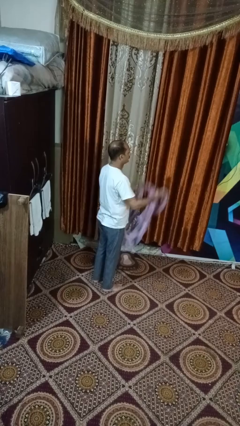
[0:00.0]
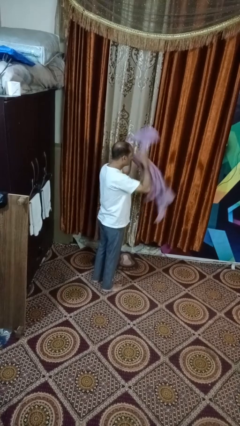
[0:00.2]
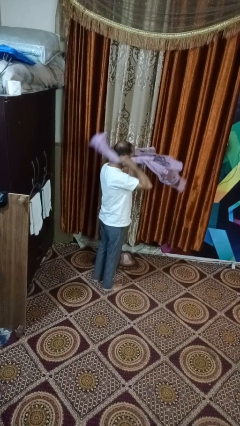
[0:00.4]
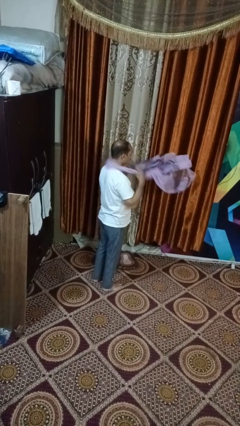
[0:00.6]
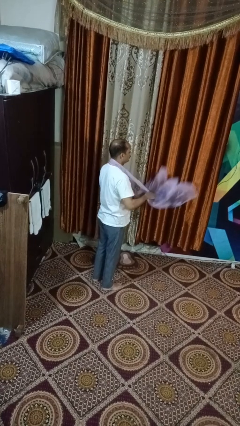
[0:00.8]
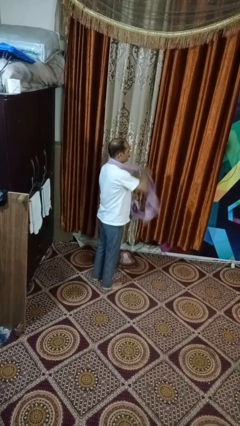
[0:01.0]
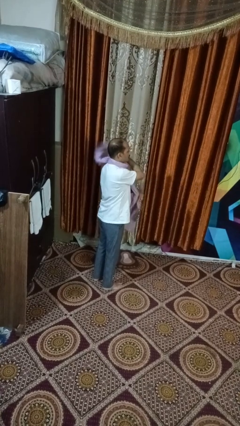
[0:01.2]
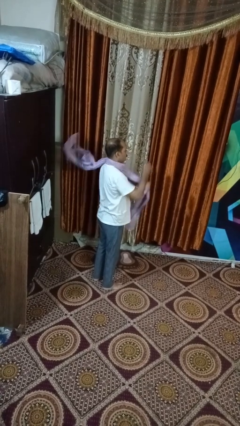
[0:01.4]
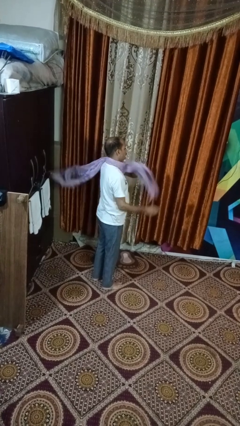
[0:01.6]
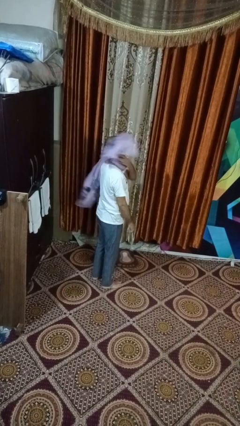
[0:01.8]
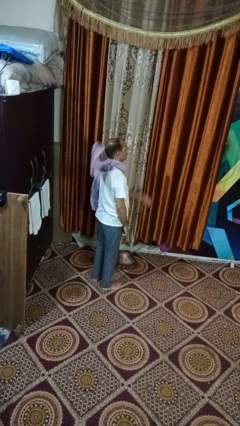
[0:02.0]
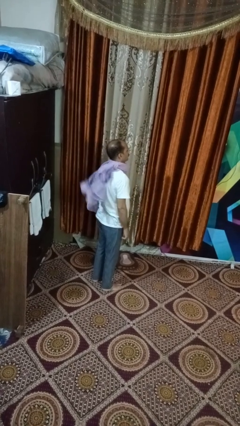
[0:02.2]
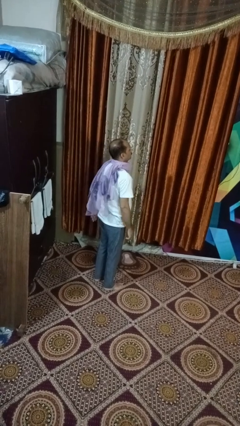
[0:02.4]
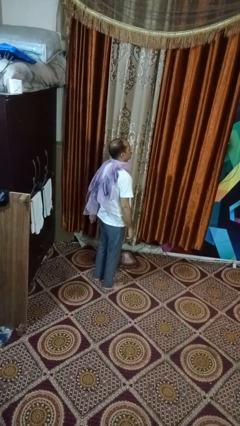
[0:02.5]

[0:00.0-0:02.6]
person puts on scarf

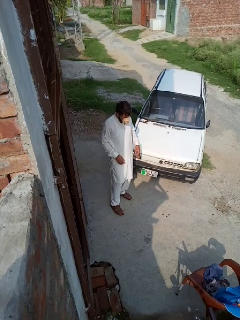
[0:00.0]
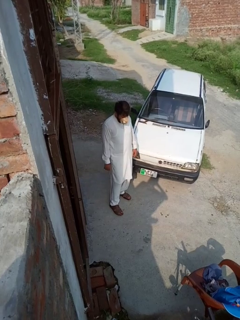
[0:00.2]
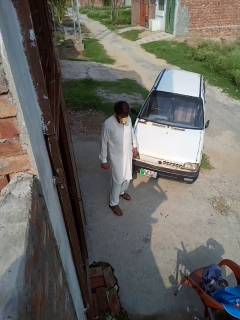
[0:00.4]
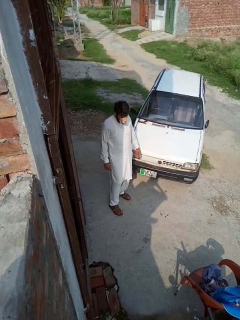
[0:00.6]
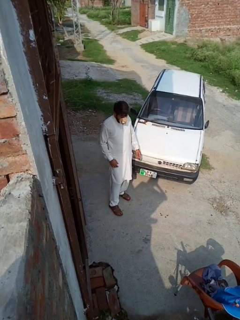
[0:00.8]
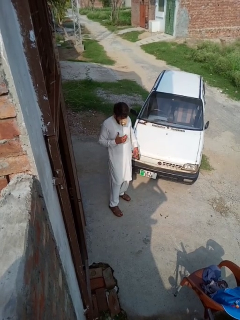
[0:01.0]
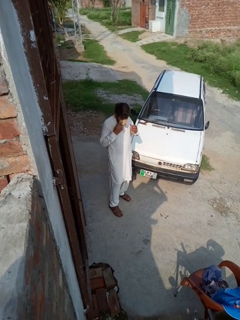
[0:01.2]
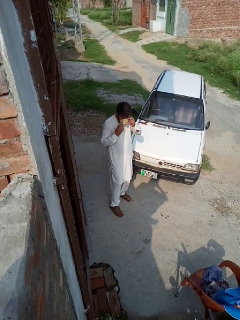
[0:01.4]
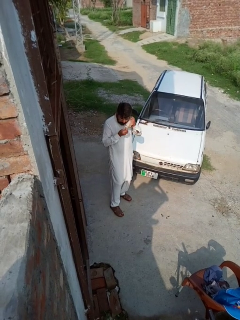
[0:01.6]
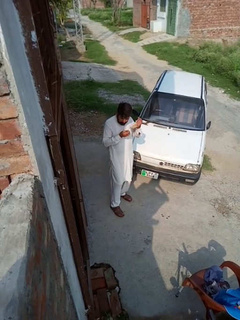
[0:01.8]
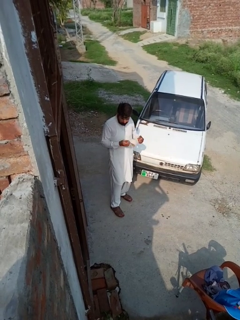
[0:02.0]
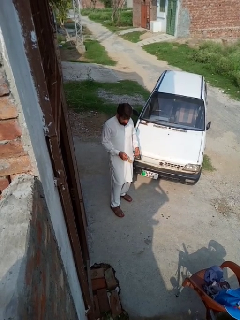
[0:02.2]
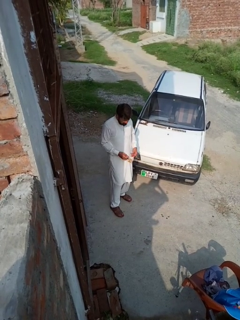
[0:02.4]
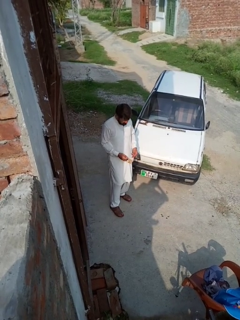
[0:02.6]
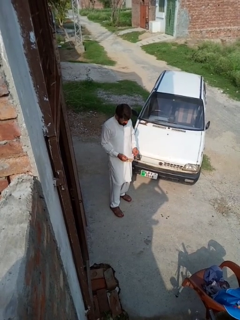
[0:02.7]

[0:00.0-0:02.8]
person takes off facemask

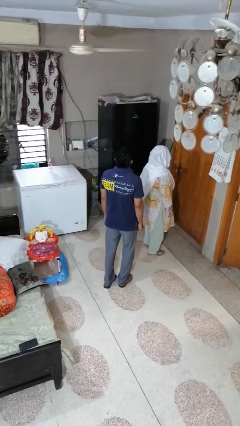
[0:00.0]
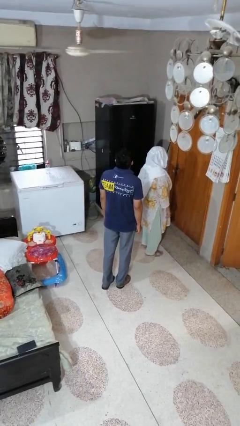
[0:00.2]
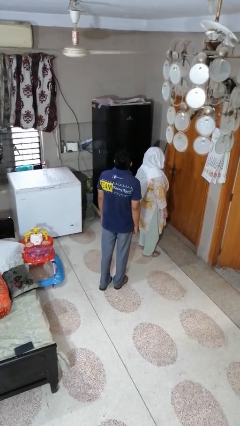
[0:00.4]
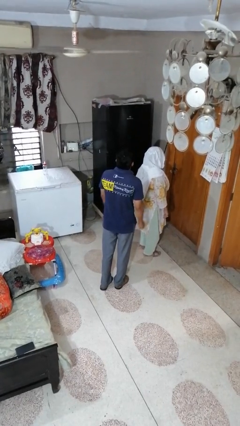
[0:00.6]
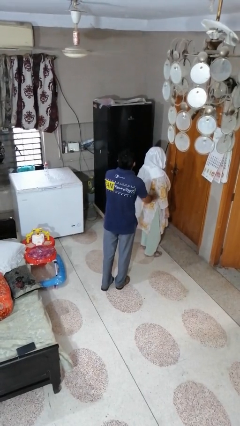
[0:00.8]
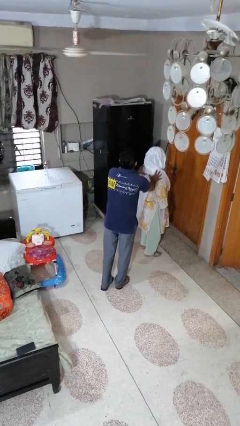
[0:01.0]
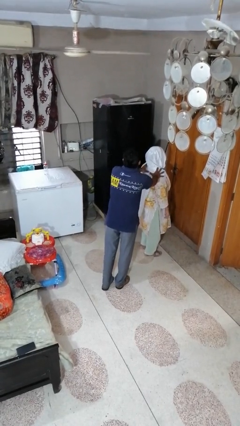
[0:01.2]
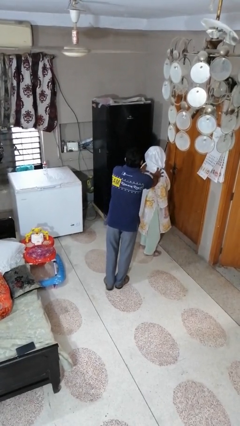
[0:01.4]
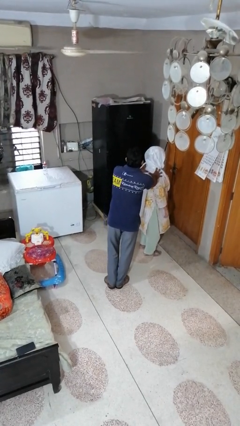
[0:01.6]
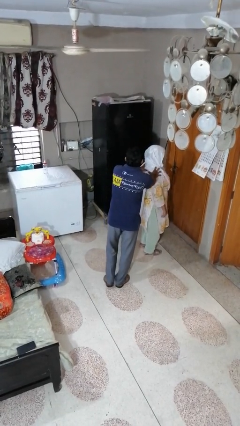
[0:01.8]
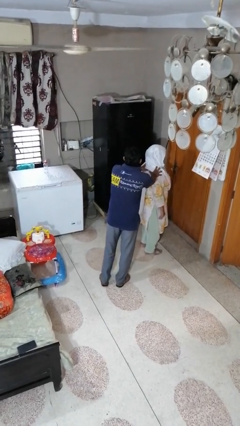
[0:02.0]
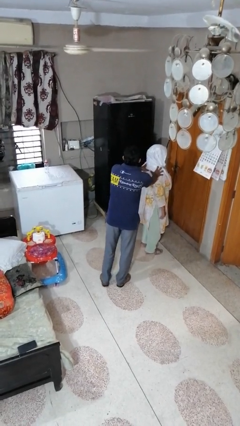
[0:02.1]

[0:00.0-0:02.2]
person grabs person by shoulder

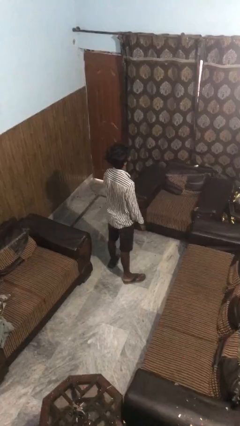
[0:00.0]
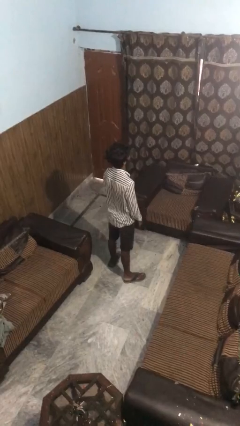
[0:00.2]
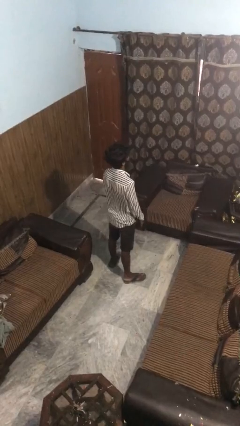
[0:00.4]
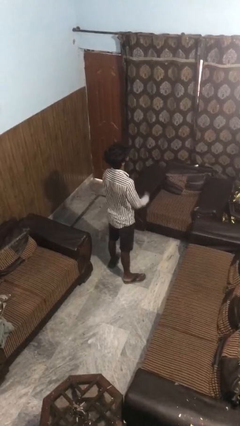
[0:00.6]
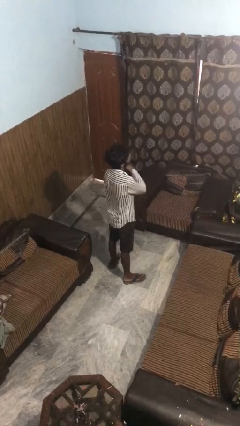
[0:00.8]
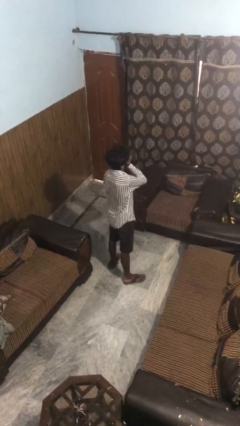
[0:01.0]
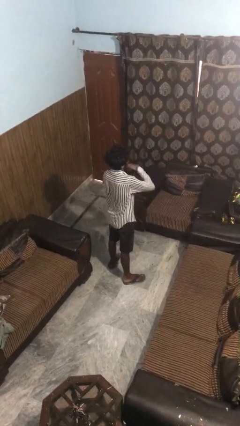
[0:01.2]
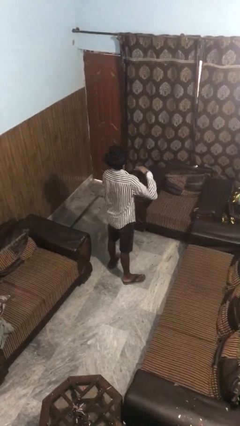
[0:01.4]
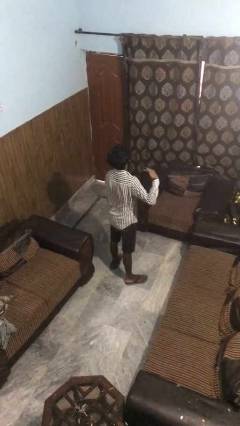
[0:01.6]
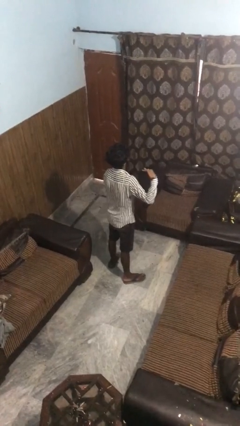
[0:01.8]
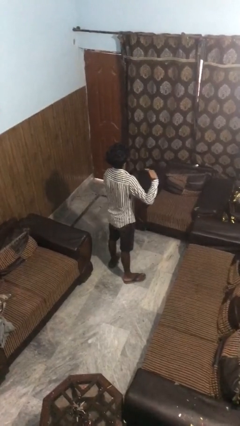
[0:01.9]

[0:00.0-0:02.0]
person gestures cut

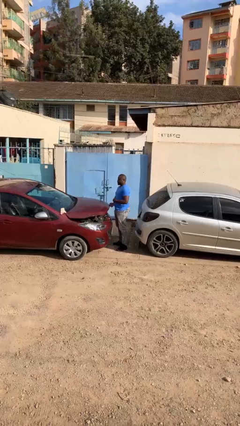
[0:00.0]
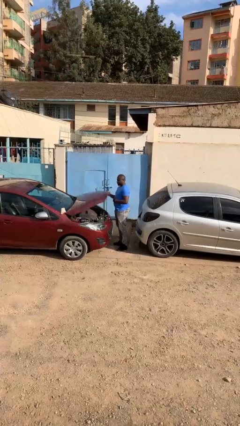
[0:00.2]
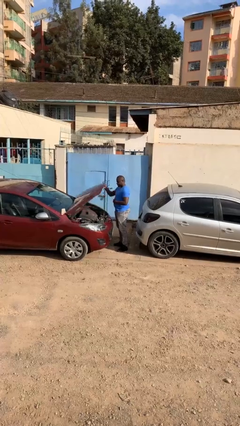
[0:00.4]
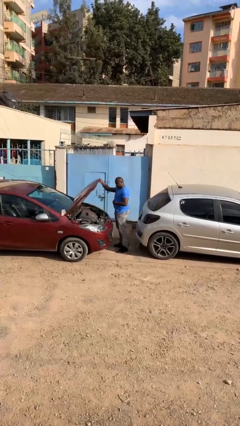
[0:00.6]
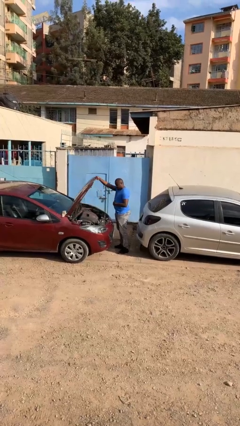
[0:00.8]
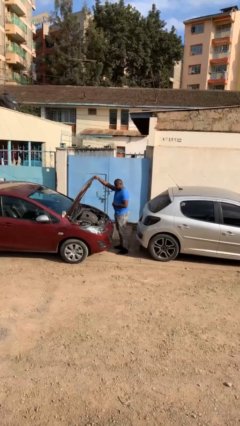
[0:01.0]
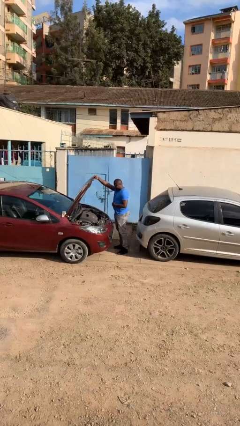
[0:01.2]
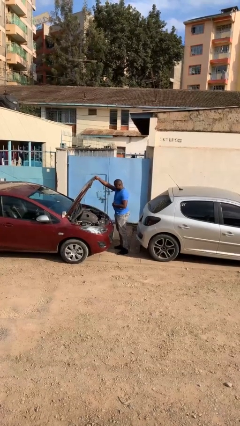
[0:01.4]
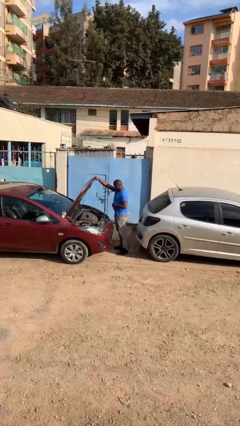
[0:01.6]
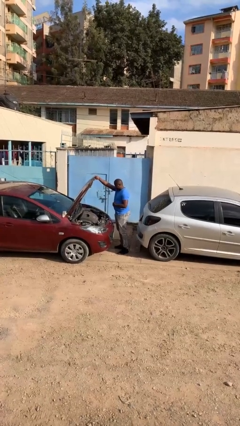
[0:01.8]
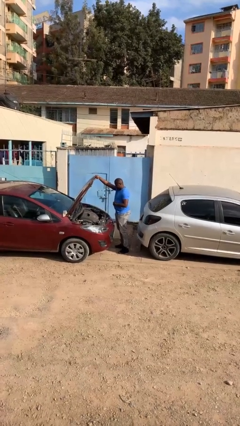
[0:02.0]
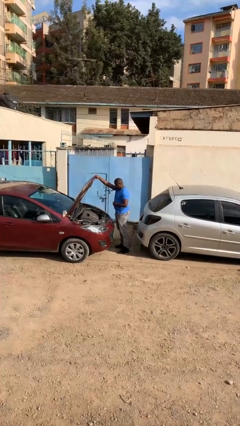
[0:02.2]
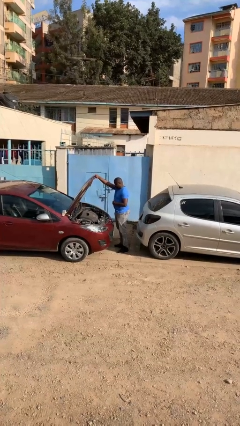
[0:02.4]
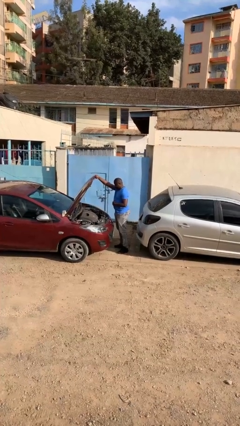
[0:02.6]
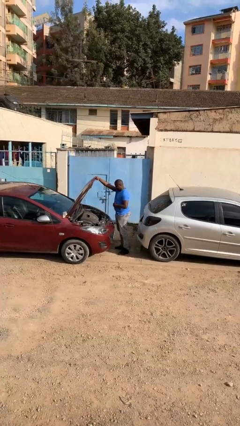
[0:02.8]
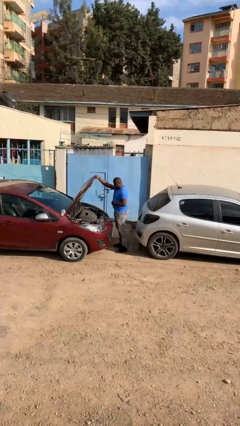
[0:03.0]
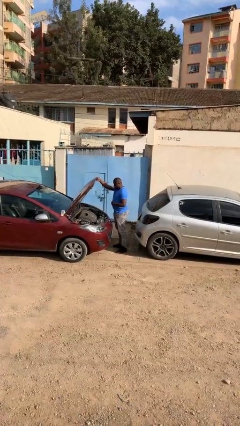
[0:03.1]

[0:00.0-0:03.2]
person opens car hood

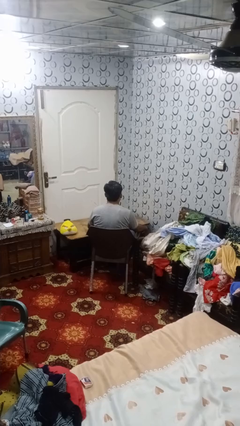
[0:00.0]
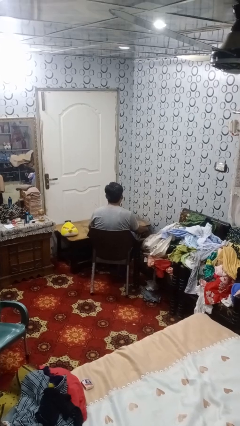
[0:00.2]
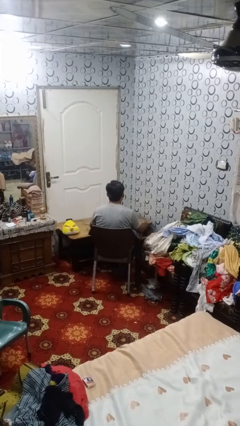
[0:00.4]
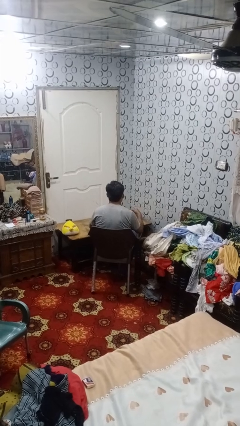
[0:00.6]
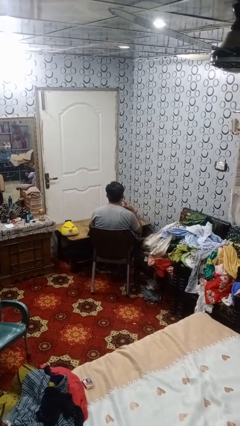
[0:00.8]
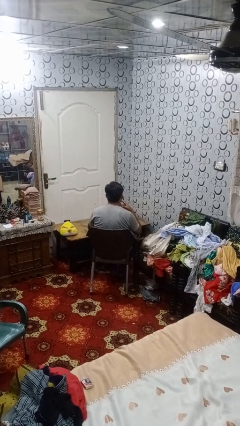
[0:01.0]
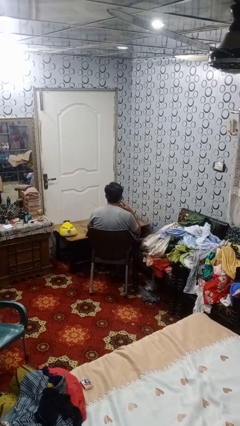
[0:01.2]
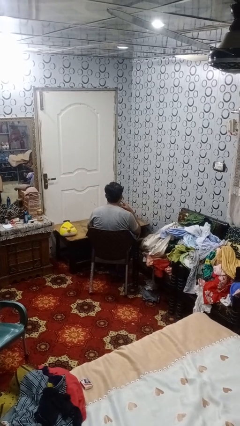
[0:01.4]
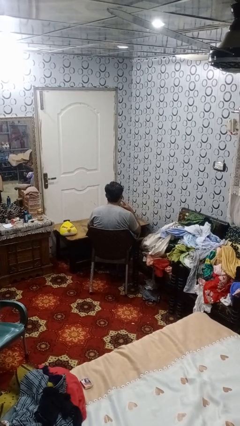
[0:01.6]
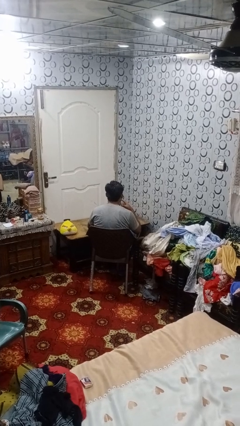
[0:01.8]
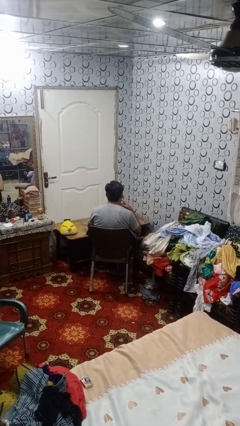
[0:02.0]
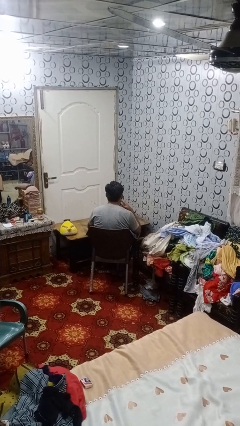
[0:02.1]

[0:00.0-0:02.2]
person licks fingers

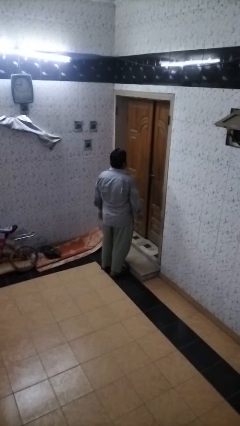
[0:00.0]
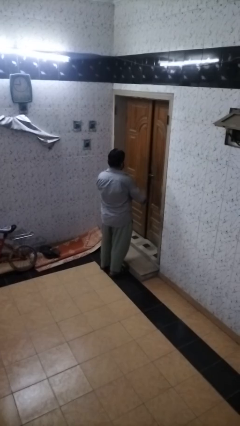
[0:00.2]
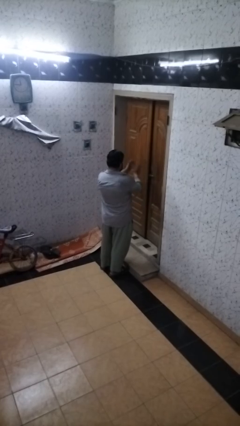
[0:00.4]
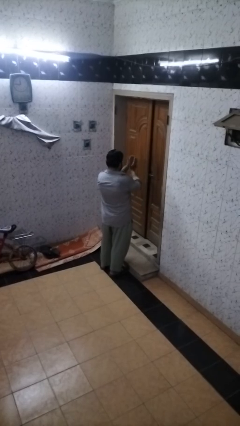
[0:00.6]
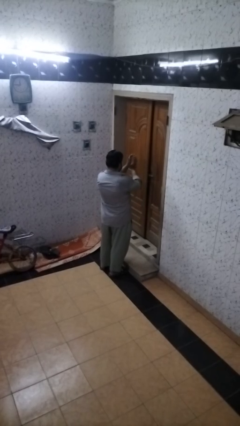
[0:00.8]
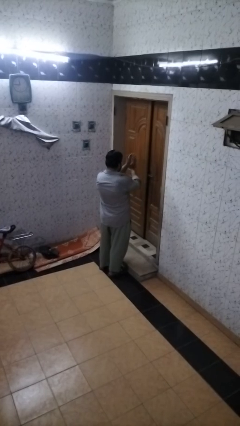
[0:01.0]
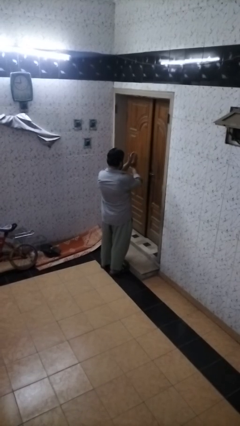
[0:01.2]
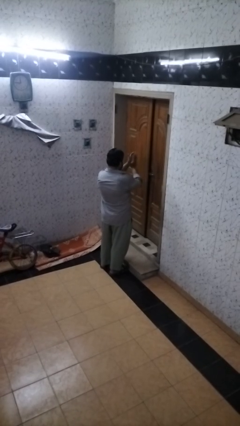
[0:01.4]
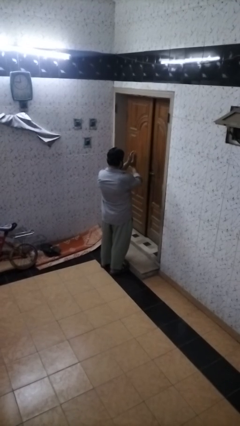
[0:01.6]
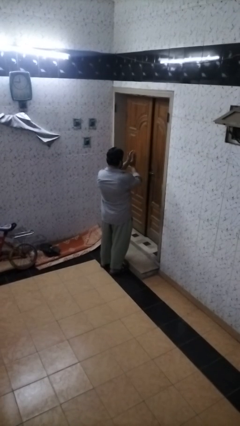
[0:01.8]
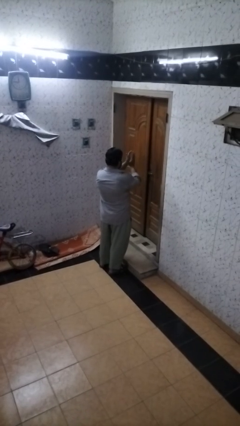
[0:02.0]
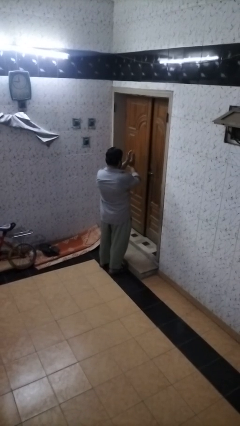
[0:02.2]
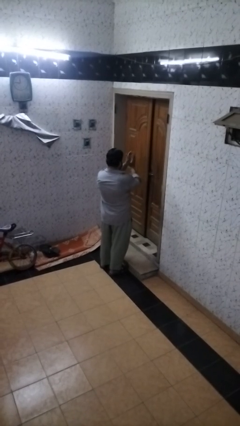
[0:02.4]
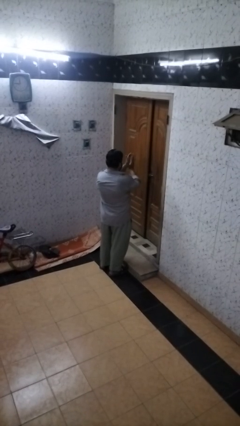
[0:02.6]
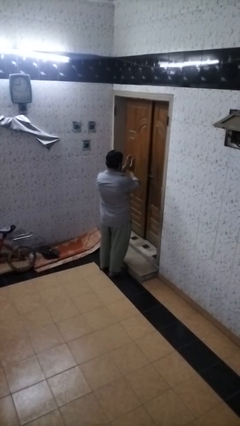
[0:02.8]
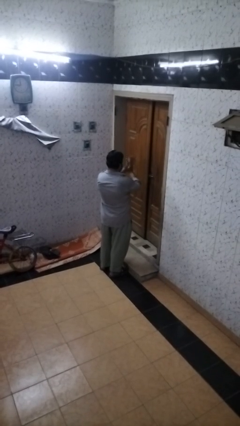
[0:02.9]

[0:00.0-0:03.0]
person claps hands
